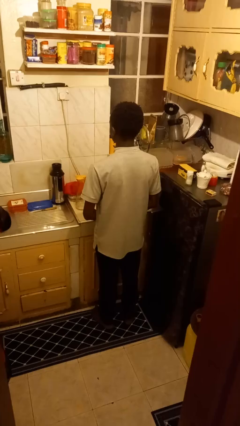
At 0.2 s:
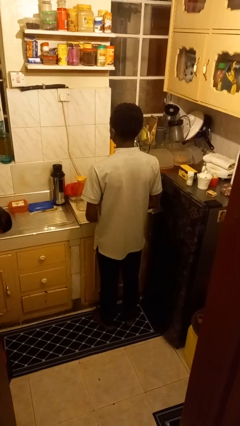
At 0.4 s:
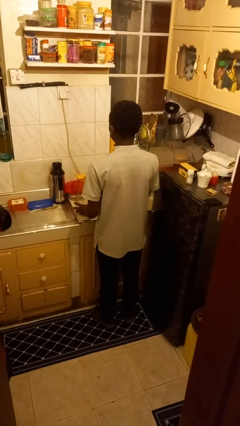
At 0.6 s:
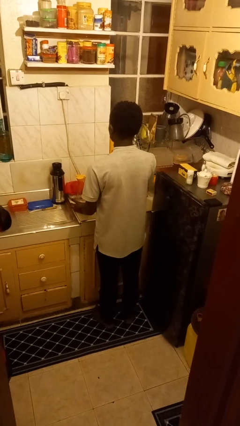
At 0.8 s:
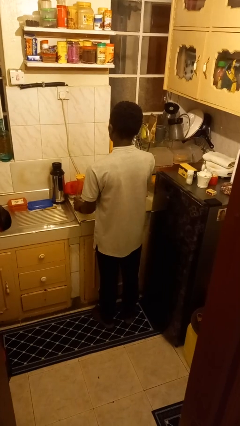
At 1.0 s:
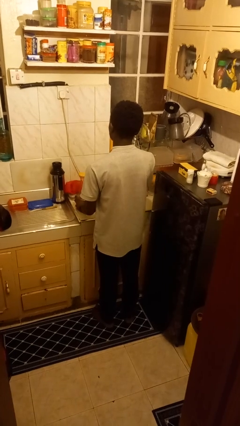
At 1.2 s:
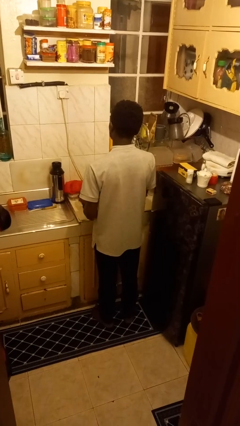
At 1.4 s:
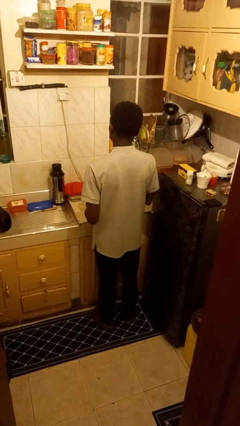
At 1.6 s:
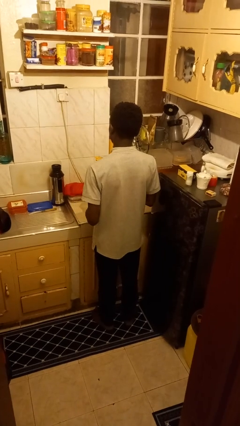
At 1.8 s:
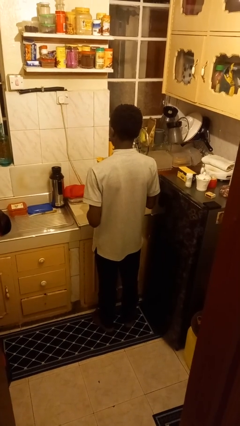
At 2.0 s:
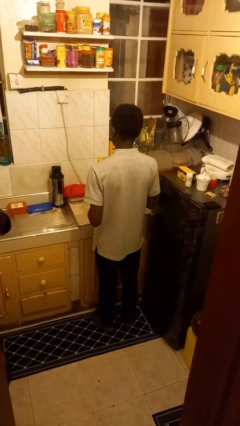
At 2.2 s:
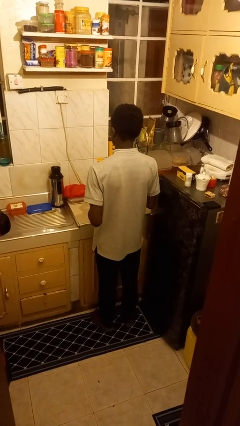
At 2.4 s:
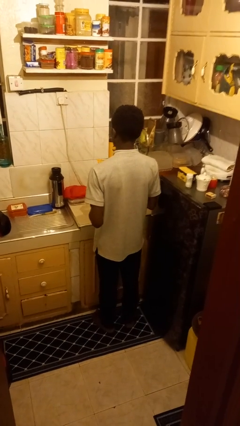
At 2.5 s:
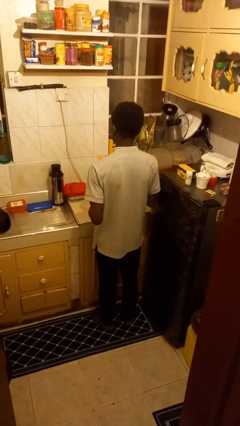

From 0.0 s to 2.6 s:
person picks up object from countertop

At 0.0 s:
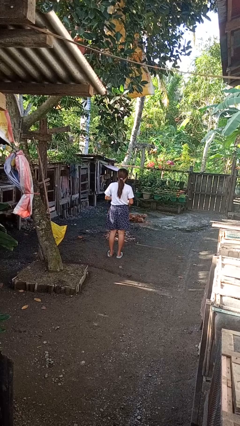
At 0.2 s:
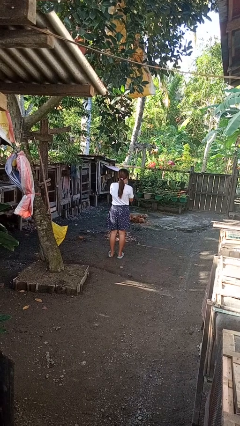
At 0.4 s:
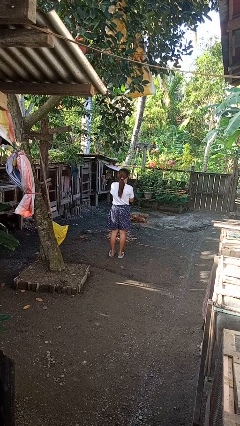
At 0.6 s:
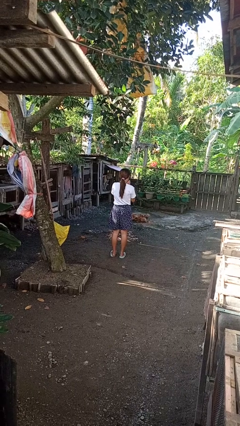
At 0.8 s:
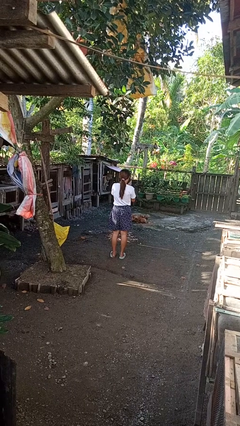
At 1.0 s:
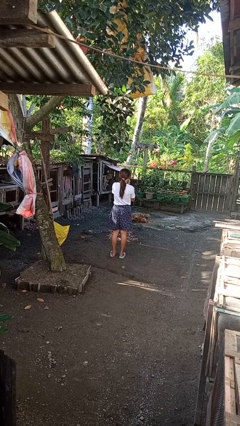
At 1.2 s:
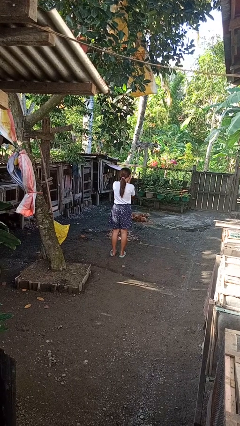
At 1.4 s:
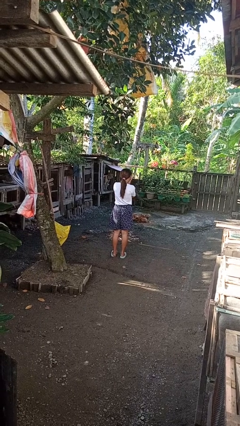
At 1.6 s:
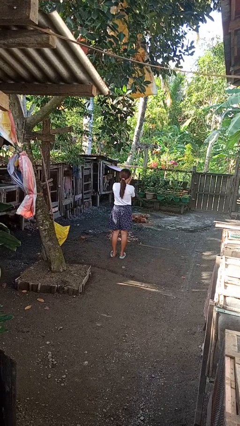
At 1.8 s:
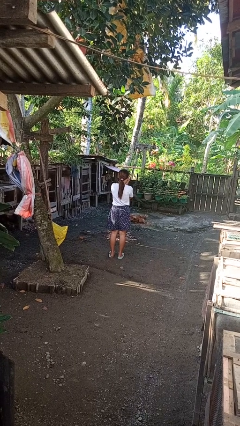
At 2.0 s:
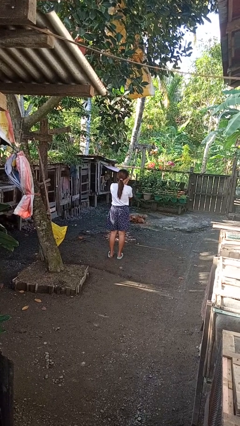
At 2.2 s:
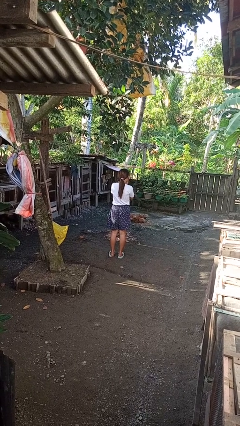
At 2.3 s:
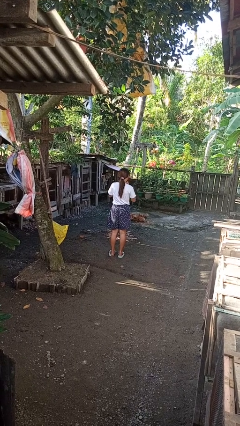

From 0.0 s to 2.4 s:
person blows into hands

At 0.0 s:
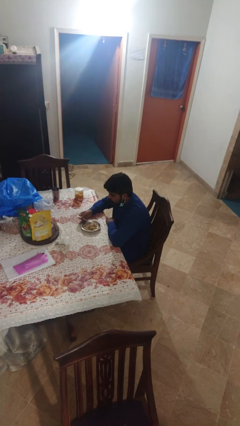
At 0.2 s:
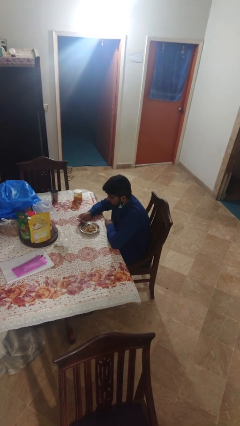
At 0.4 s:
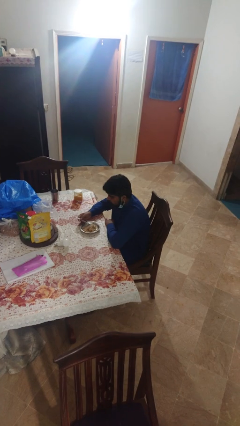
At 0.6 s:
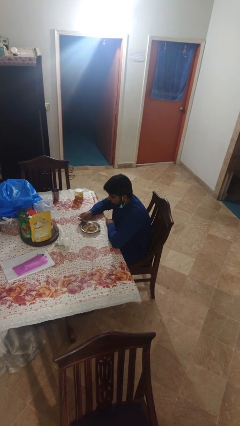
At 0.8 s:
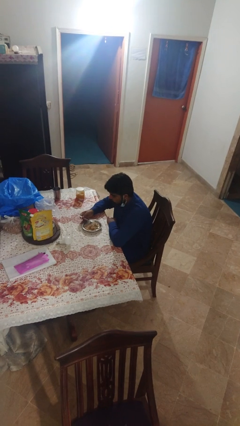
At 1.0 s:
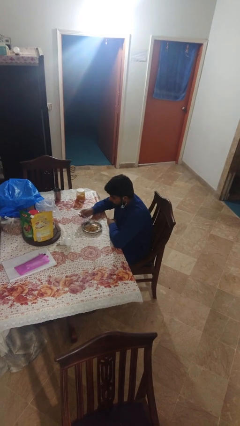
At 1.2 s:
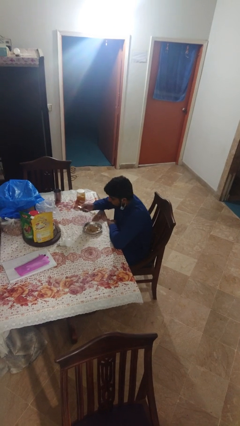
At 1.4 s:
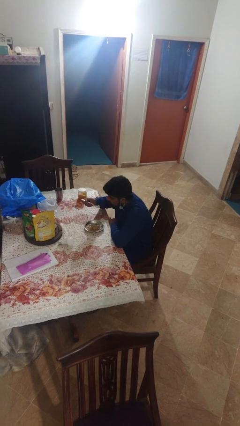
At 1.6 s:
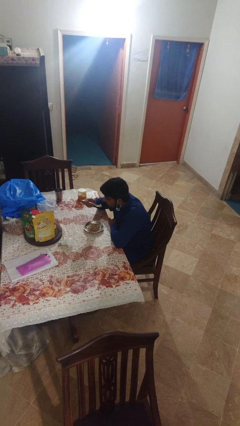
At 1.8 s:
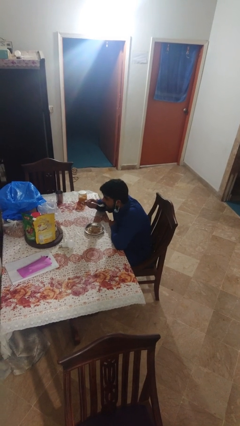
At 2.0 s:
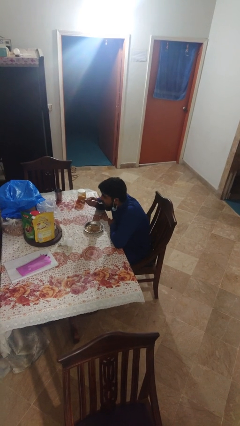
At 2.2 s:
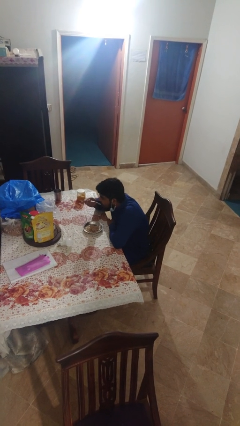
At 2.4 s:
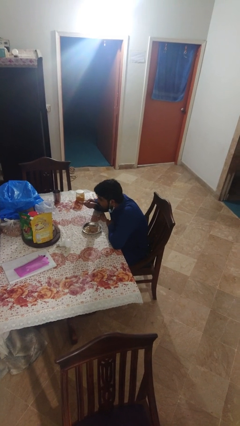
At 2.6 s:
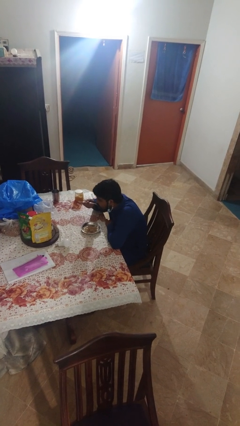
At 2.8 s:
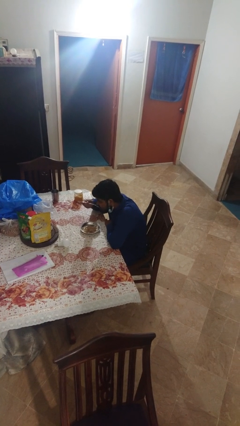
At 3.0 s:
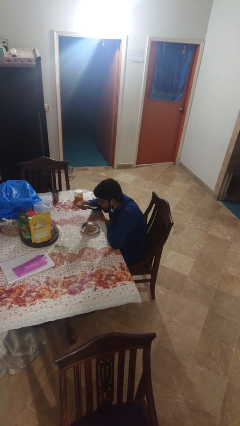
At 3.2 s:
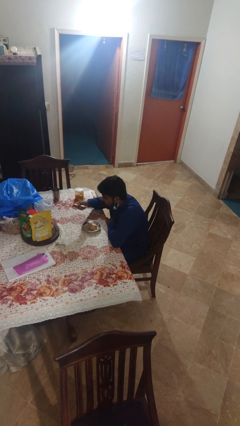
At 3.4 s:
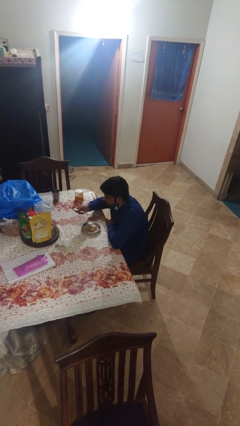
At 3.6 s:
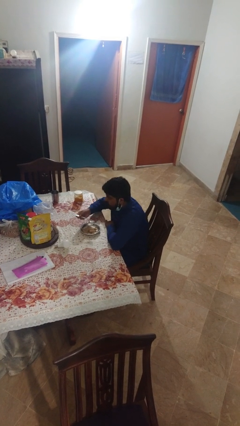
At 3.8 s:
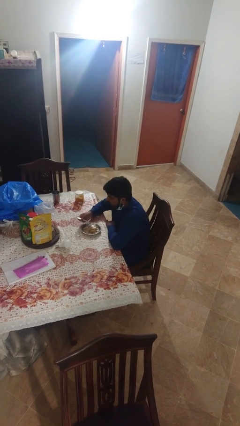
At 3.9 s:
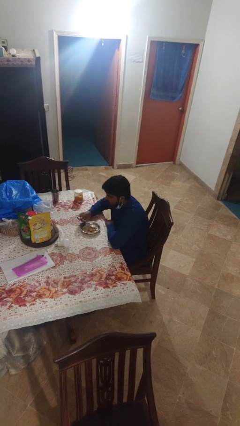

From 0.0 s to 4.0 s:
person eats with utensil

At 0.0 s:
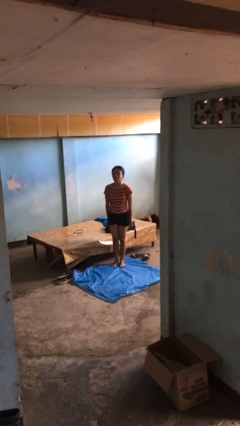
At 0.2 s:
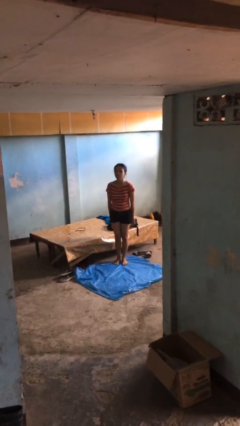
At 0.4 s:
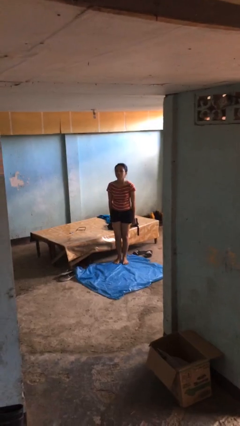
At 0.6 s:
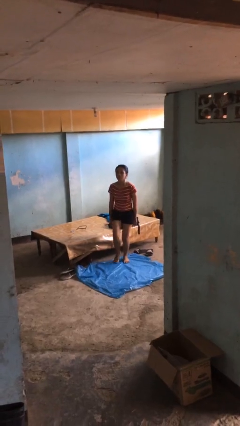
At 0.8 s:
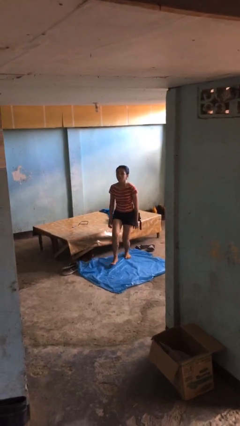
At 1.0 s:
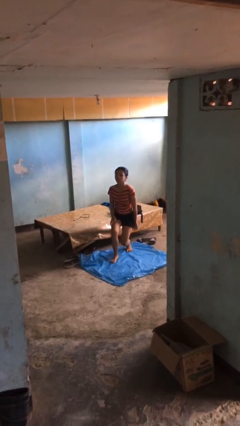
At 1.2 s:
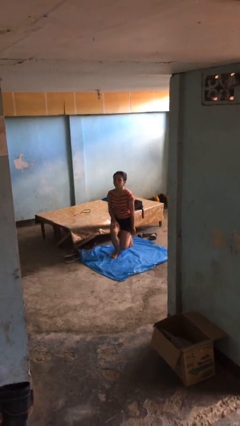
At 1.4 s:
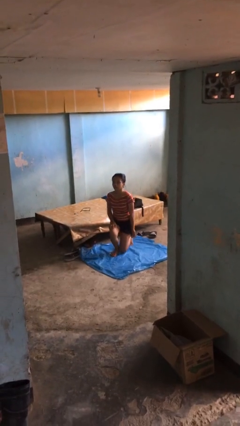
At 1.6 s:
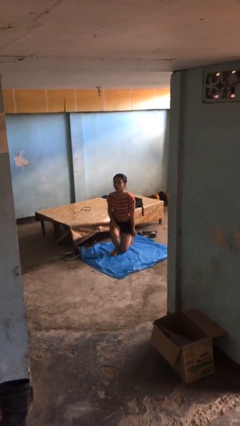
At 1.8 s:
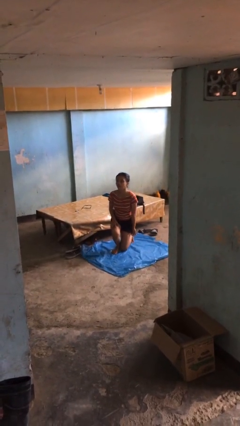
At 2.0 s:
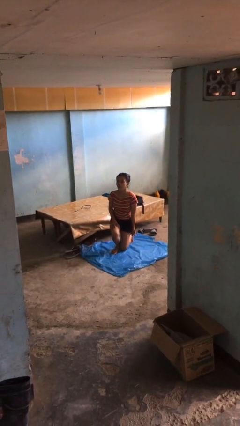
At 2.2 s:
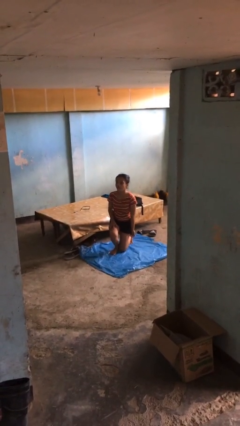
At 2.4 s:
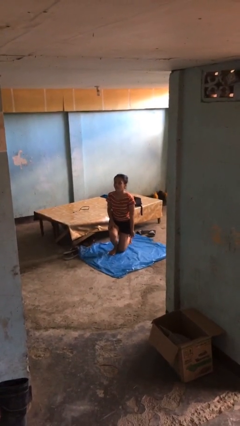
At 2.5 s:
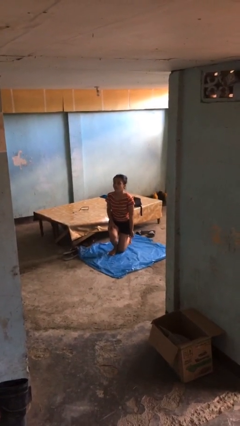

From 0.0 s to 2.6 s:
person kneels

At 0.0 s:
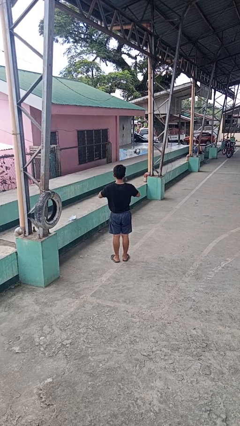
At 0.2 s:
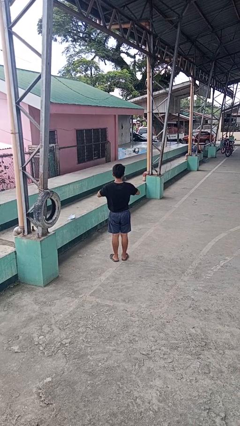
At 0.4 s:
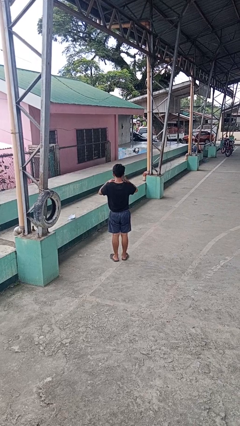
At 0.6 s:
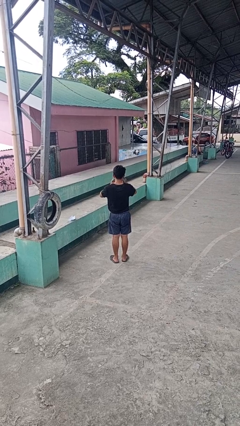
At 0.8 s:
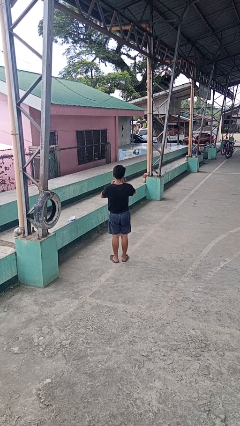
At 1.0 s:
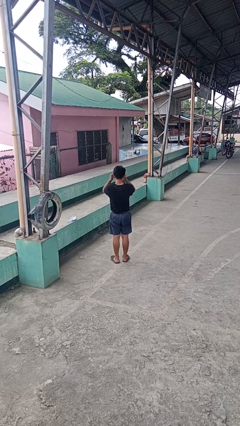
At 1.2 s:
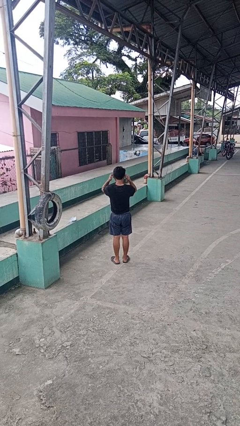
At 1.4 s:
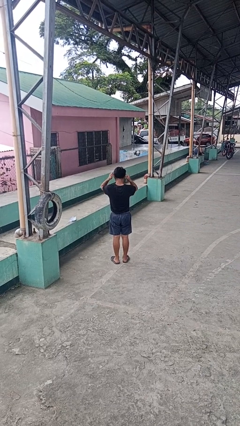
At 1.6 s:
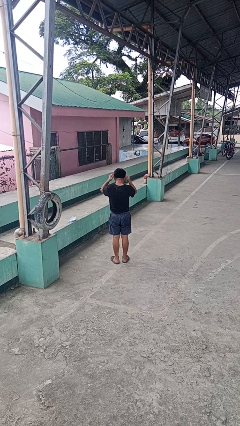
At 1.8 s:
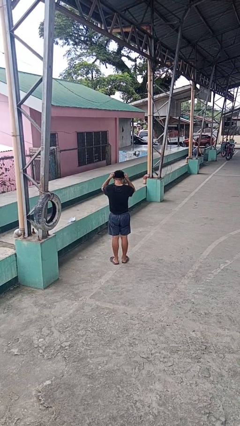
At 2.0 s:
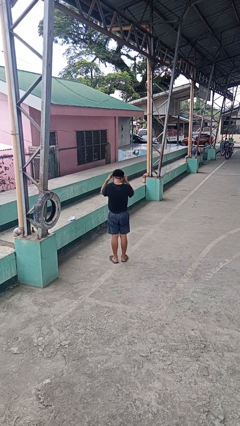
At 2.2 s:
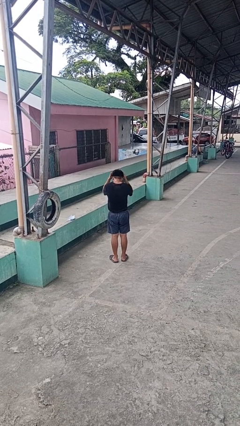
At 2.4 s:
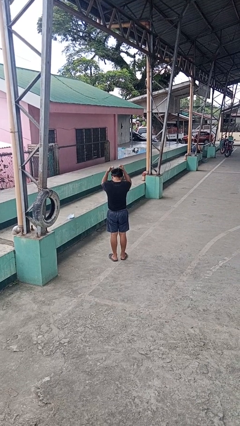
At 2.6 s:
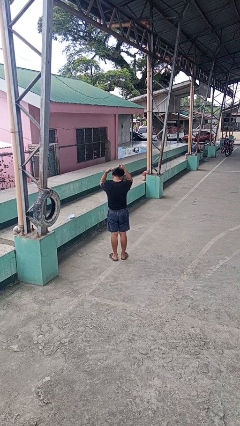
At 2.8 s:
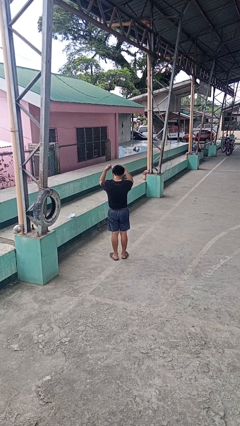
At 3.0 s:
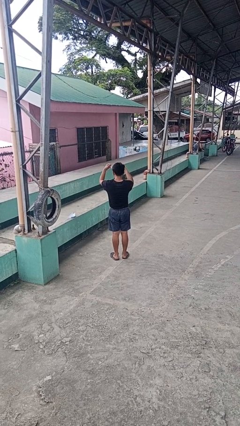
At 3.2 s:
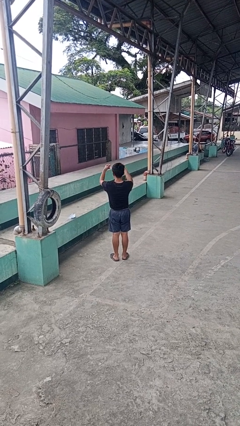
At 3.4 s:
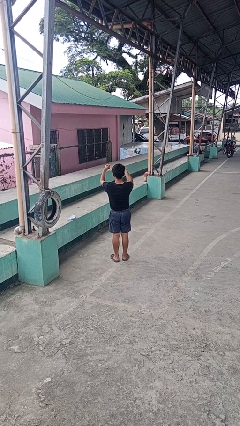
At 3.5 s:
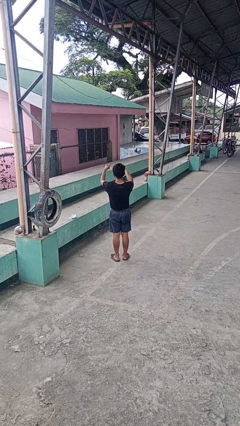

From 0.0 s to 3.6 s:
person takes off necklace

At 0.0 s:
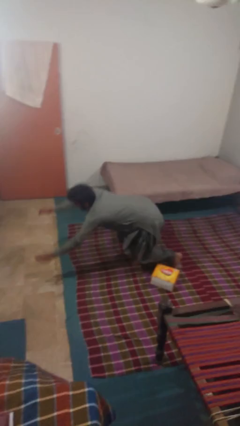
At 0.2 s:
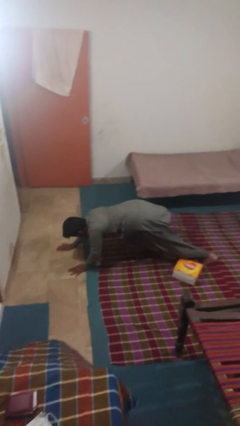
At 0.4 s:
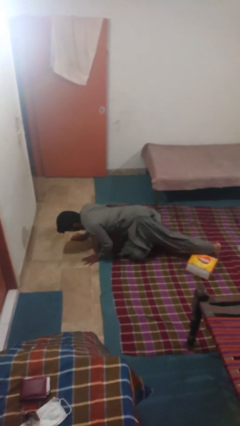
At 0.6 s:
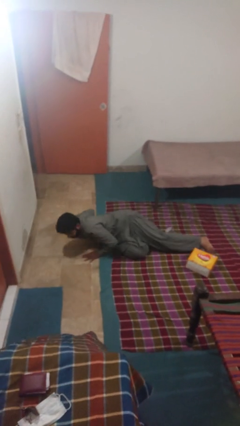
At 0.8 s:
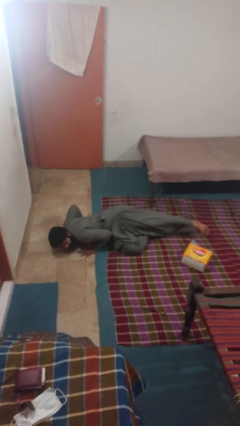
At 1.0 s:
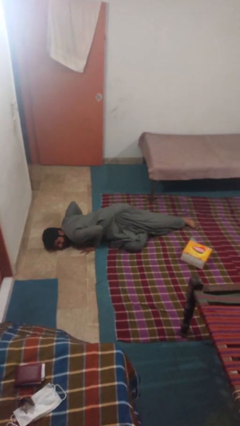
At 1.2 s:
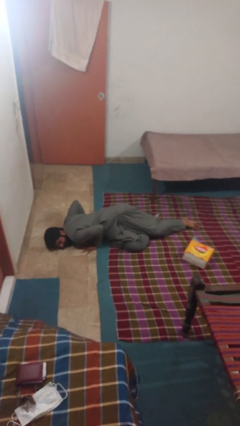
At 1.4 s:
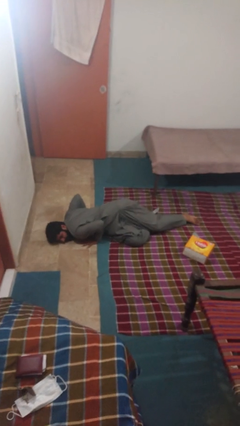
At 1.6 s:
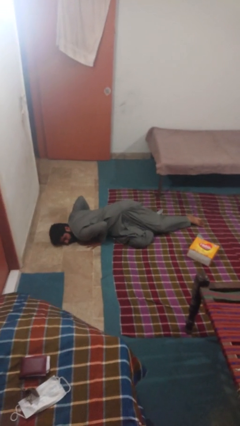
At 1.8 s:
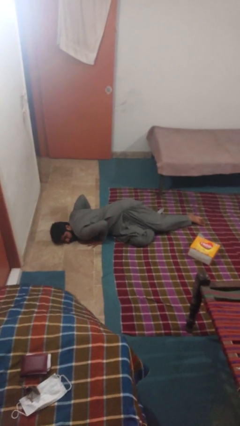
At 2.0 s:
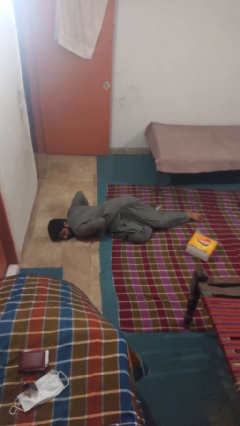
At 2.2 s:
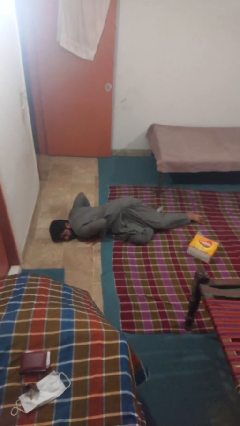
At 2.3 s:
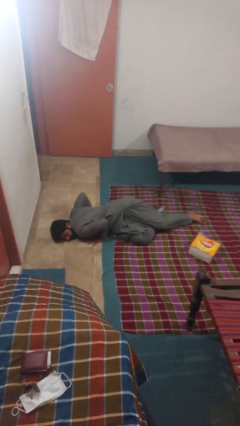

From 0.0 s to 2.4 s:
person lies down on floor
